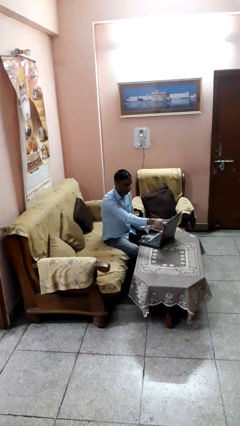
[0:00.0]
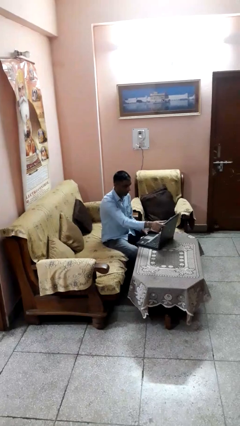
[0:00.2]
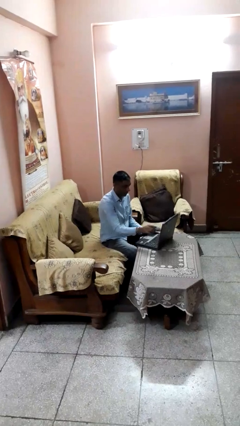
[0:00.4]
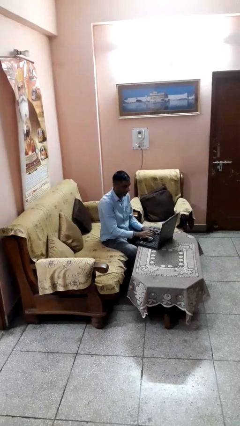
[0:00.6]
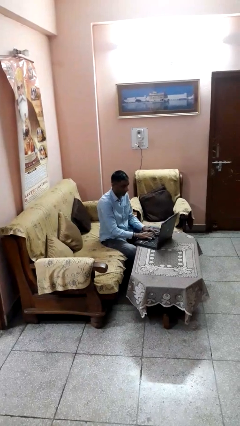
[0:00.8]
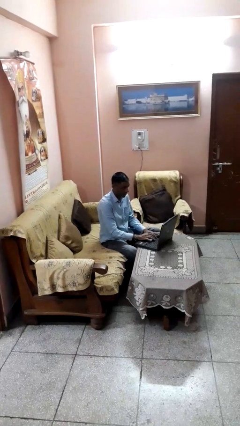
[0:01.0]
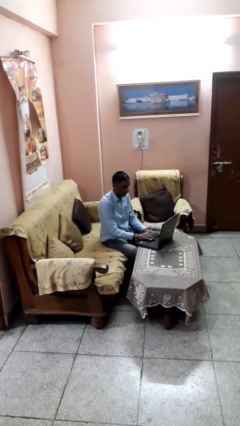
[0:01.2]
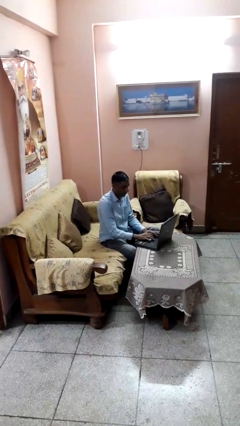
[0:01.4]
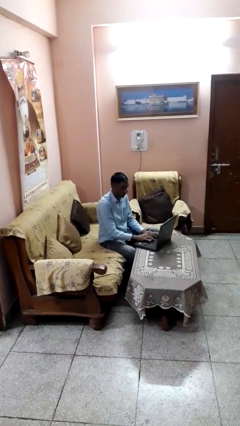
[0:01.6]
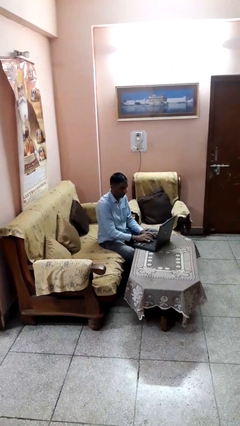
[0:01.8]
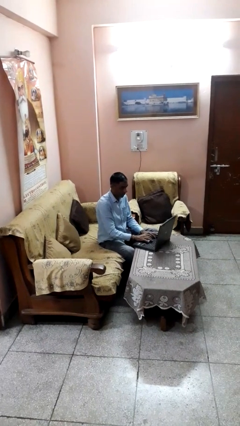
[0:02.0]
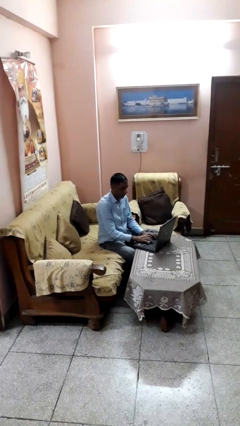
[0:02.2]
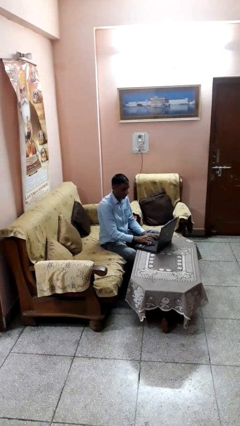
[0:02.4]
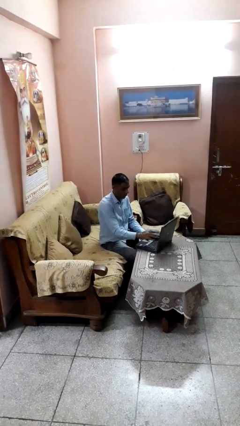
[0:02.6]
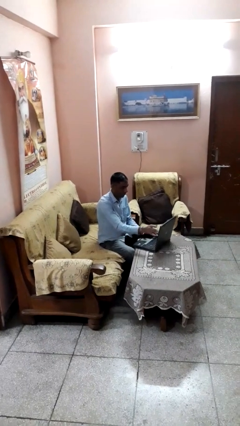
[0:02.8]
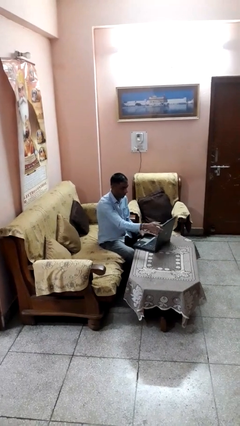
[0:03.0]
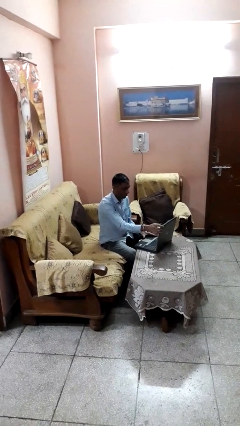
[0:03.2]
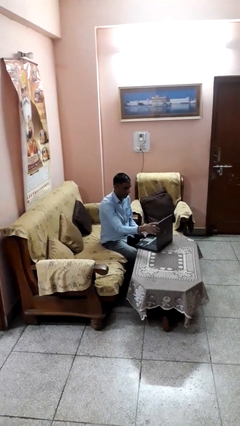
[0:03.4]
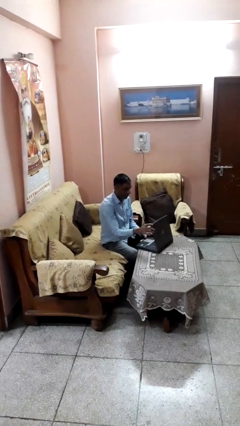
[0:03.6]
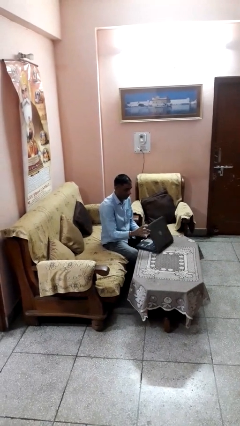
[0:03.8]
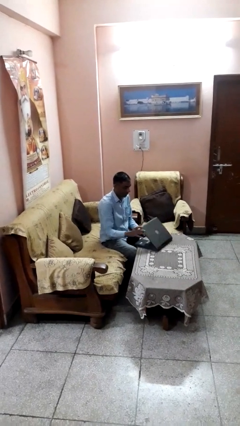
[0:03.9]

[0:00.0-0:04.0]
person interacts with laptop

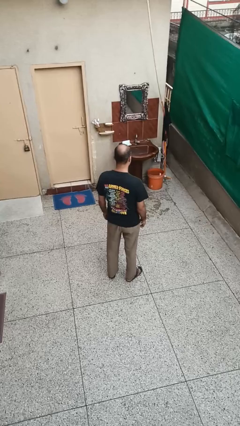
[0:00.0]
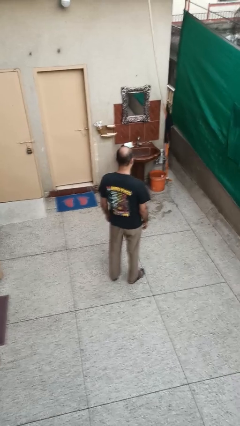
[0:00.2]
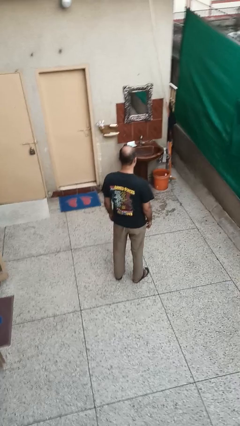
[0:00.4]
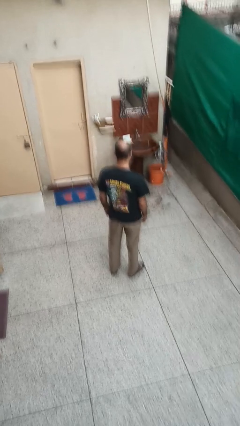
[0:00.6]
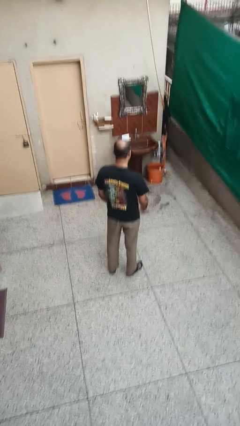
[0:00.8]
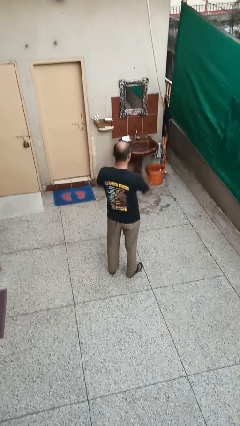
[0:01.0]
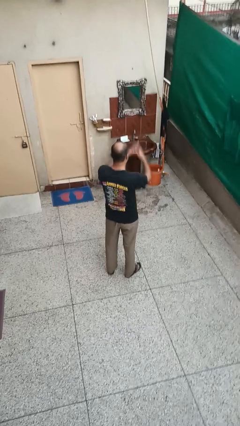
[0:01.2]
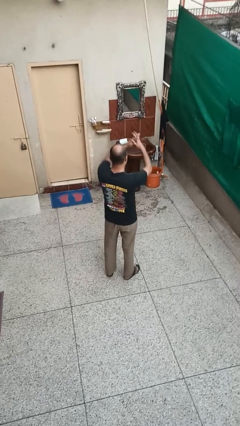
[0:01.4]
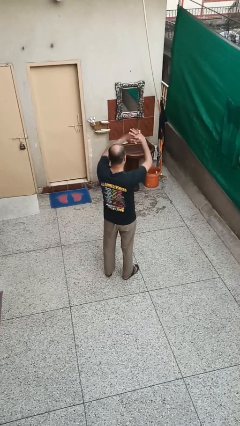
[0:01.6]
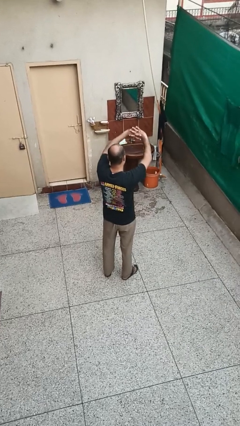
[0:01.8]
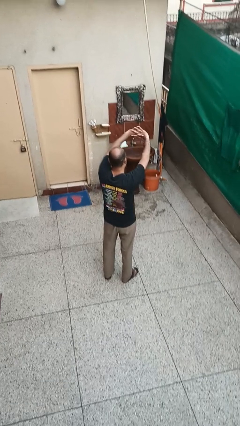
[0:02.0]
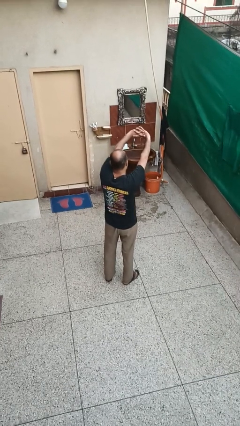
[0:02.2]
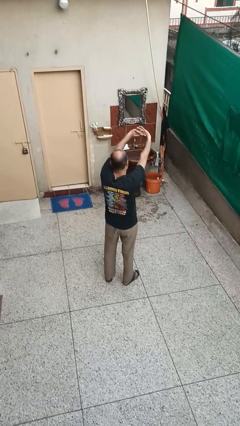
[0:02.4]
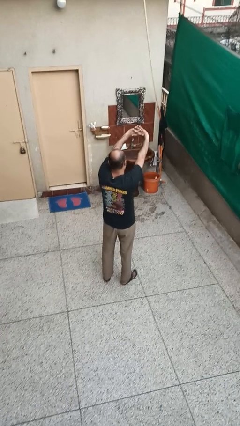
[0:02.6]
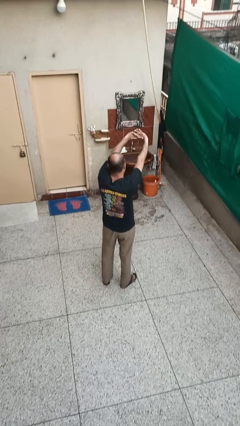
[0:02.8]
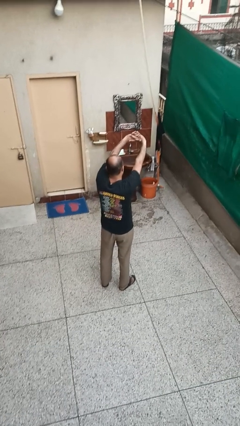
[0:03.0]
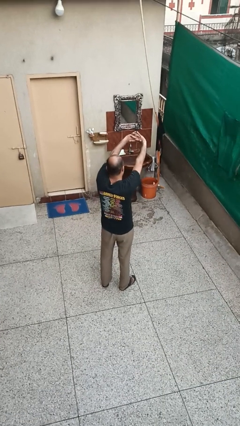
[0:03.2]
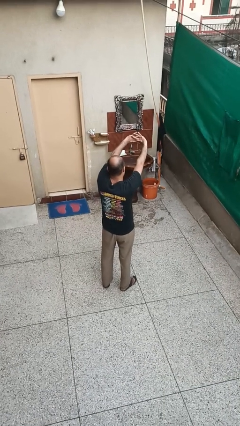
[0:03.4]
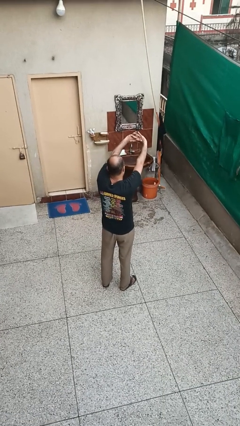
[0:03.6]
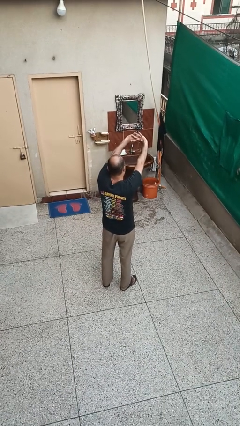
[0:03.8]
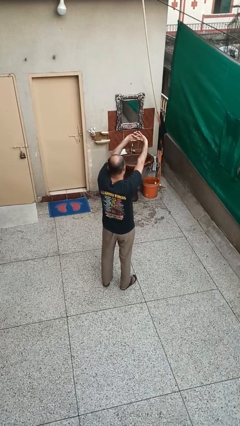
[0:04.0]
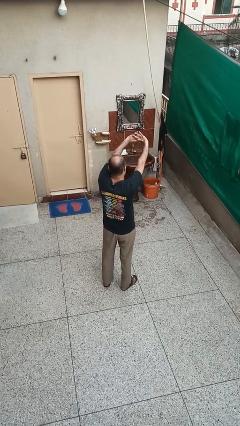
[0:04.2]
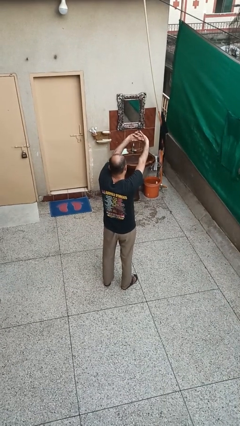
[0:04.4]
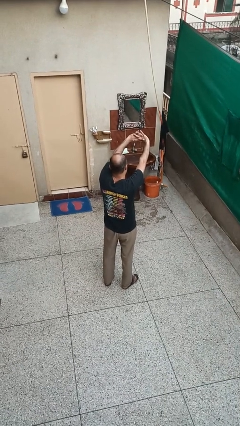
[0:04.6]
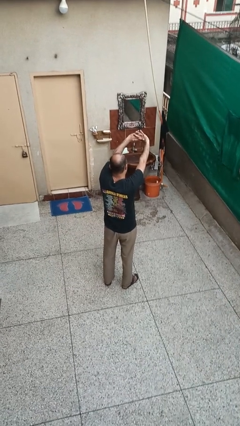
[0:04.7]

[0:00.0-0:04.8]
person cracks knuckles

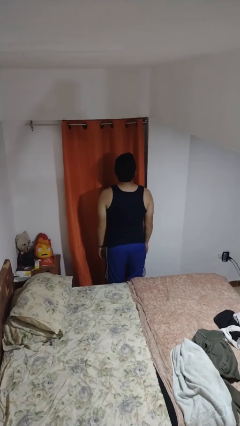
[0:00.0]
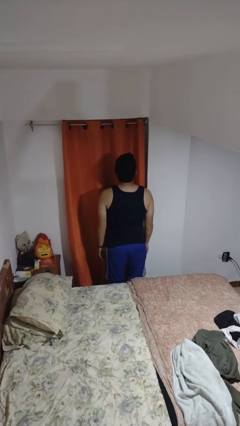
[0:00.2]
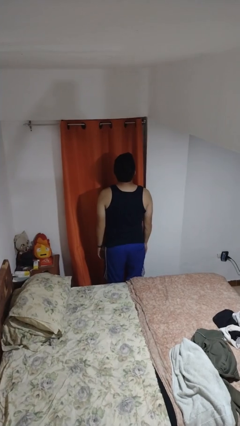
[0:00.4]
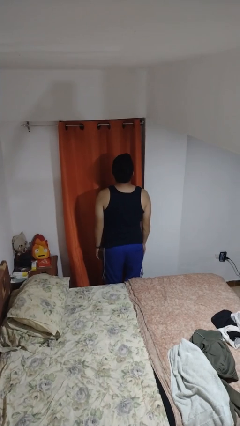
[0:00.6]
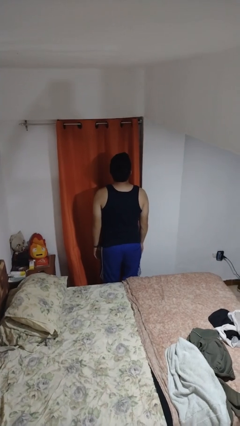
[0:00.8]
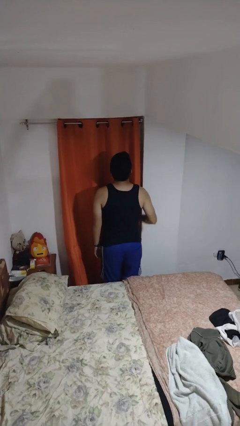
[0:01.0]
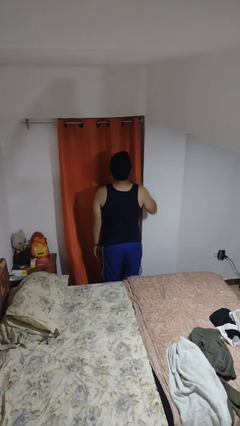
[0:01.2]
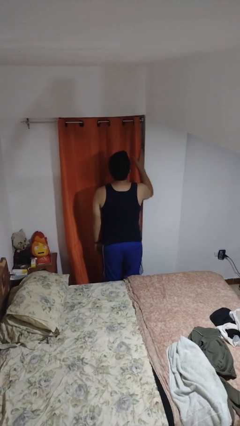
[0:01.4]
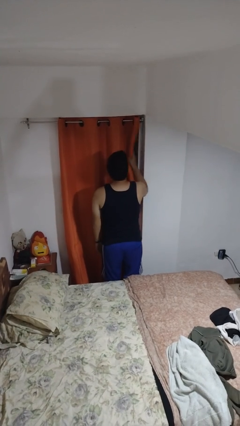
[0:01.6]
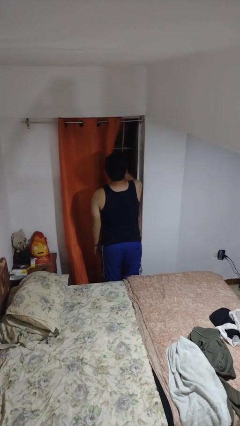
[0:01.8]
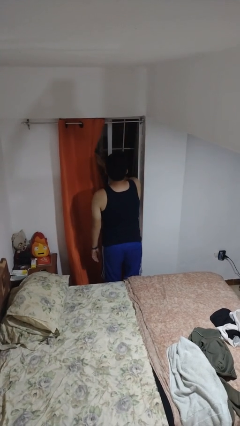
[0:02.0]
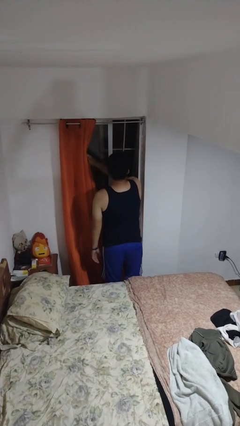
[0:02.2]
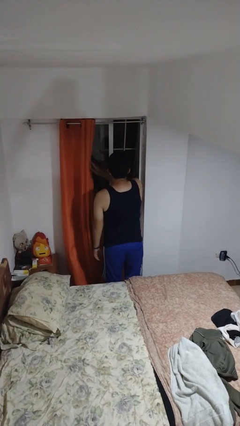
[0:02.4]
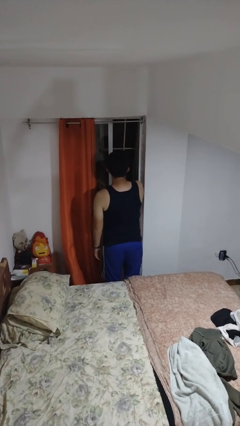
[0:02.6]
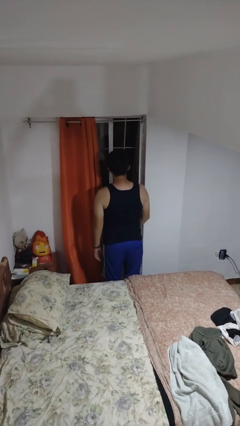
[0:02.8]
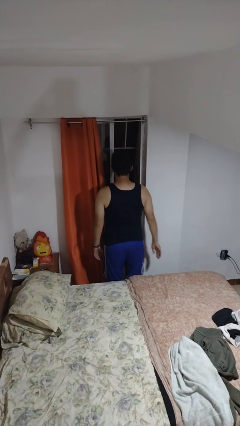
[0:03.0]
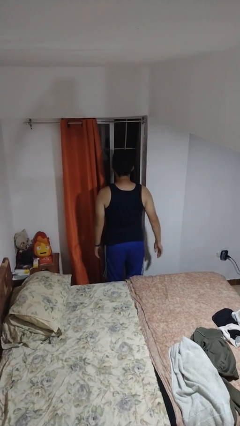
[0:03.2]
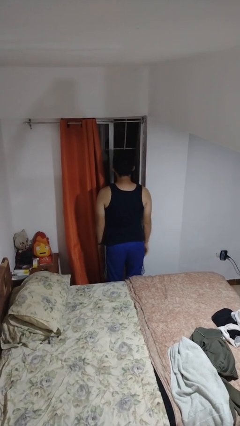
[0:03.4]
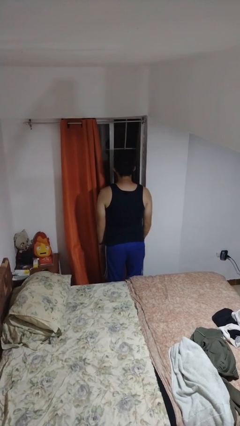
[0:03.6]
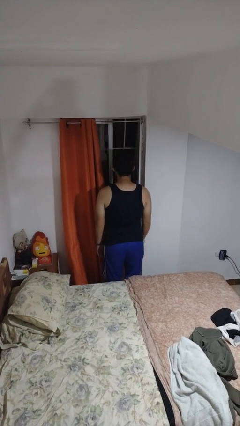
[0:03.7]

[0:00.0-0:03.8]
person opens curtains

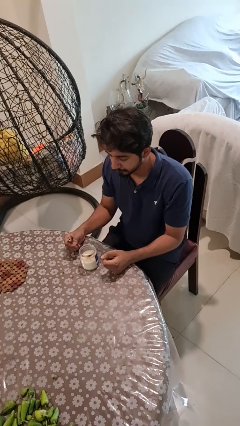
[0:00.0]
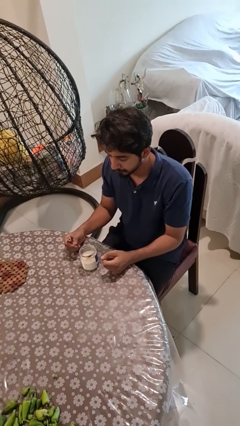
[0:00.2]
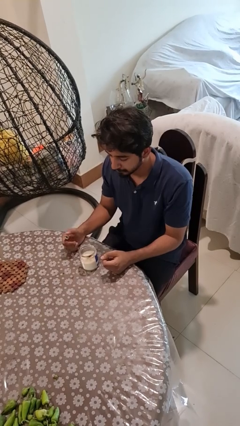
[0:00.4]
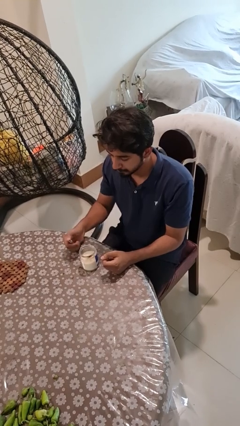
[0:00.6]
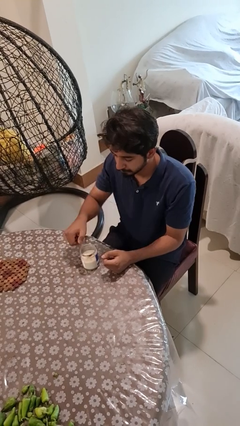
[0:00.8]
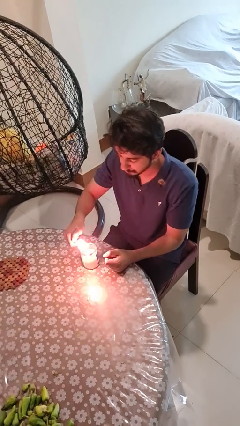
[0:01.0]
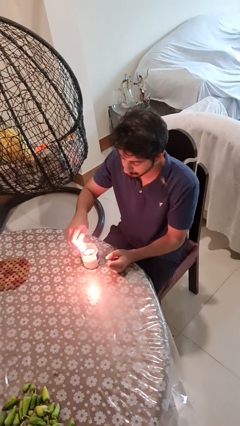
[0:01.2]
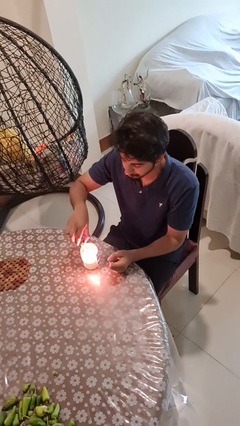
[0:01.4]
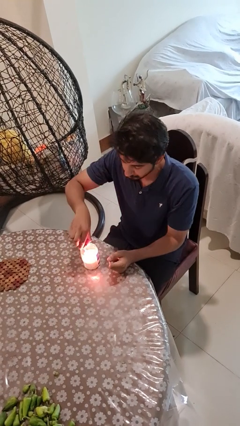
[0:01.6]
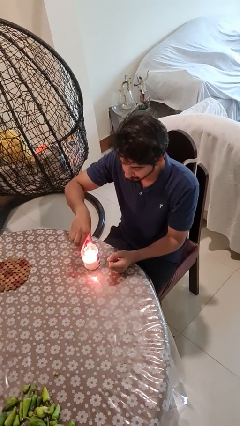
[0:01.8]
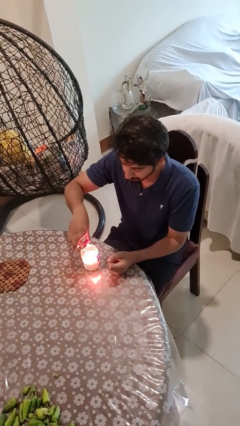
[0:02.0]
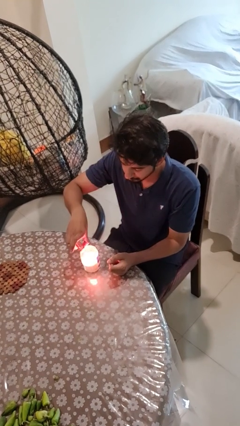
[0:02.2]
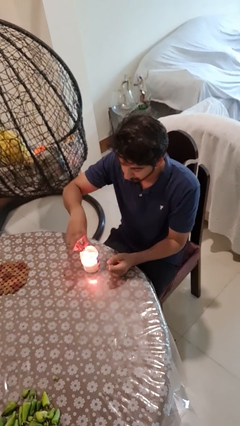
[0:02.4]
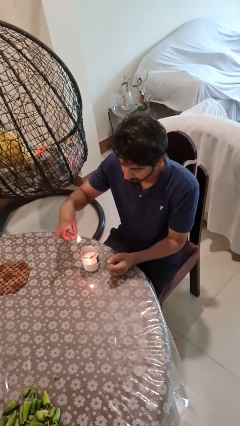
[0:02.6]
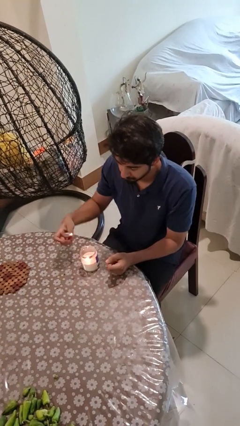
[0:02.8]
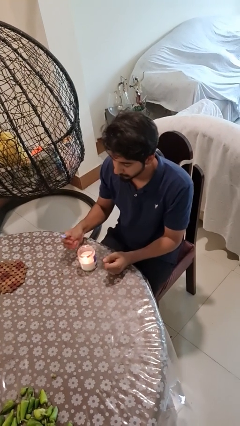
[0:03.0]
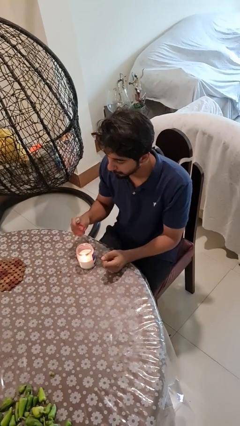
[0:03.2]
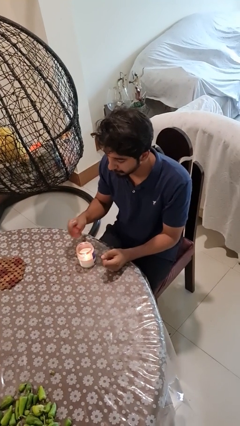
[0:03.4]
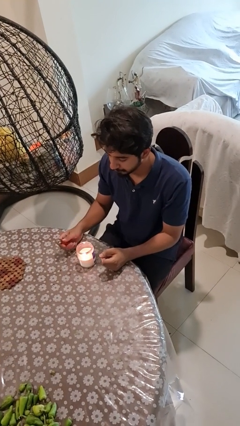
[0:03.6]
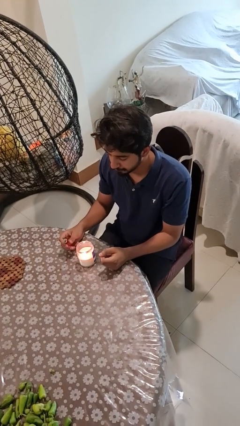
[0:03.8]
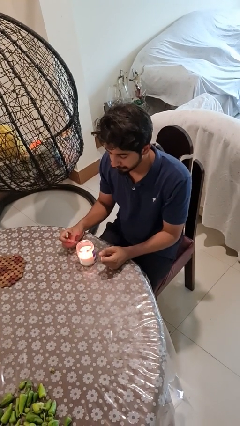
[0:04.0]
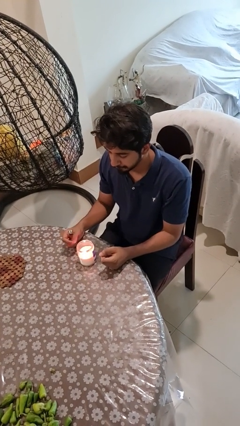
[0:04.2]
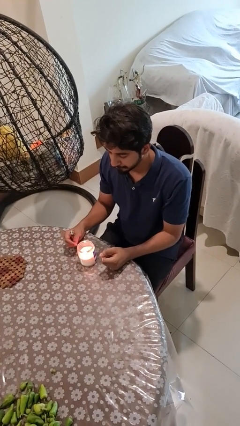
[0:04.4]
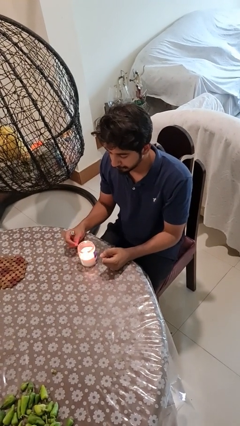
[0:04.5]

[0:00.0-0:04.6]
person lights candle

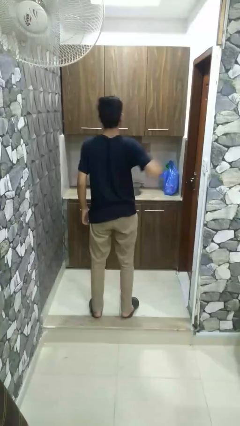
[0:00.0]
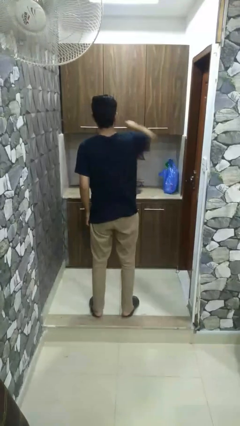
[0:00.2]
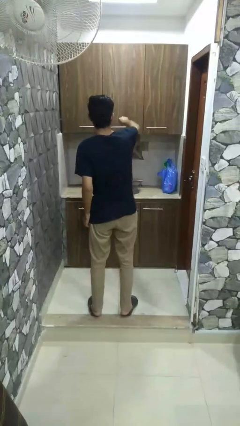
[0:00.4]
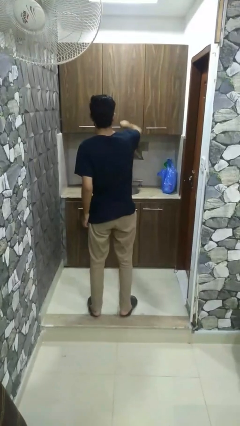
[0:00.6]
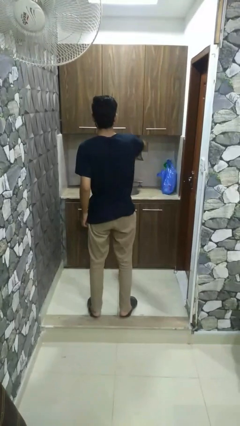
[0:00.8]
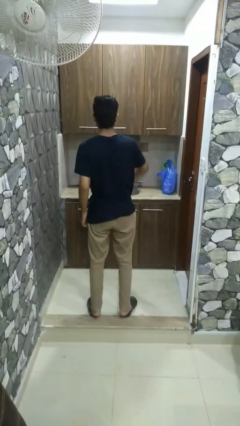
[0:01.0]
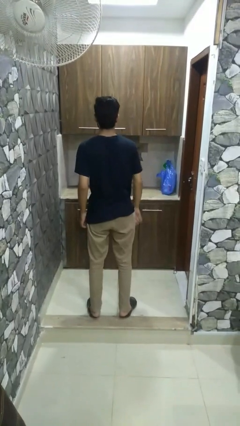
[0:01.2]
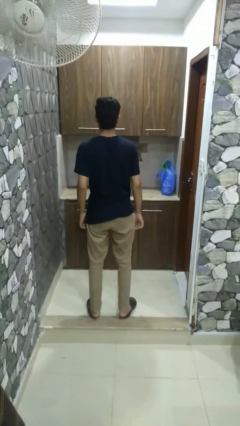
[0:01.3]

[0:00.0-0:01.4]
person punches
